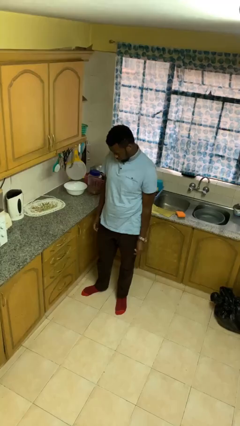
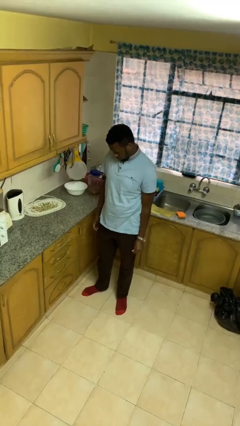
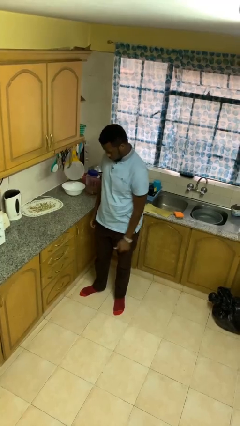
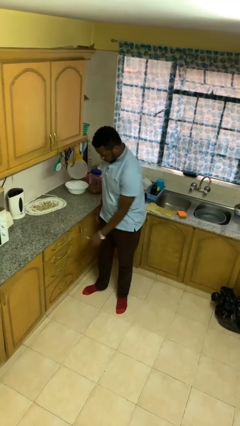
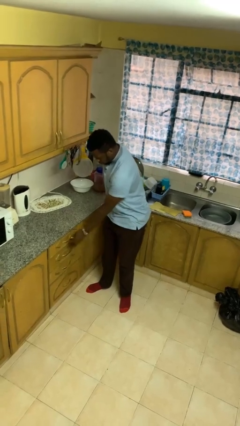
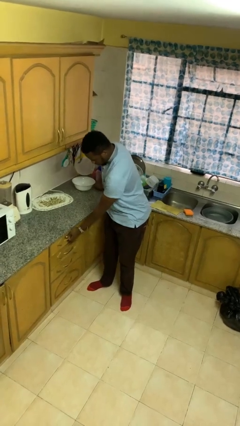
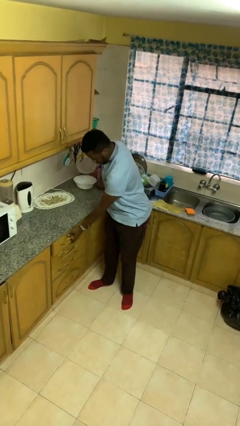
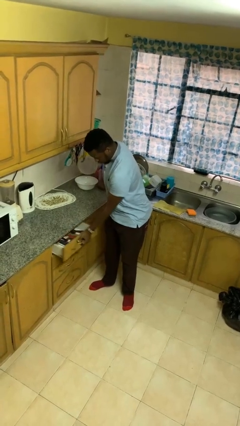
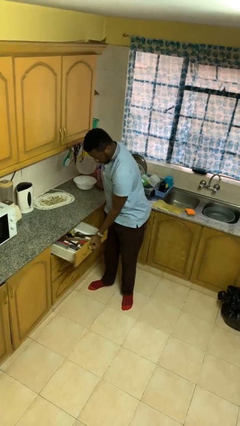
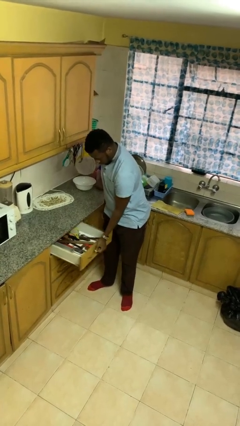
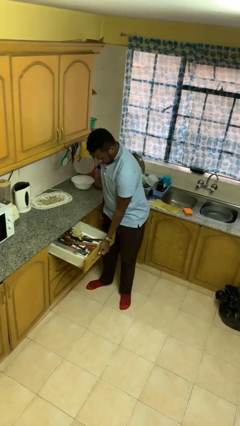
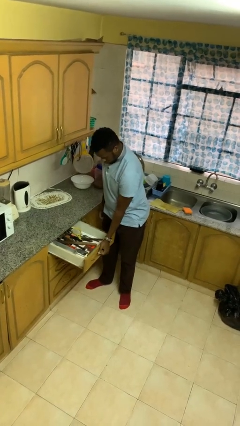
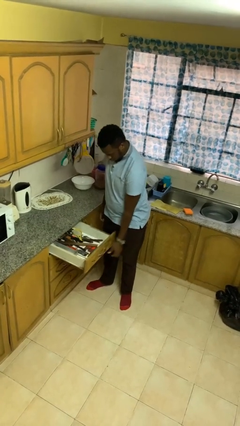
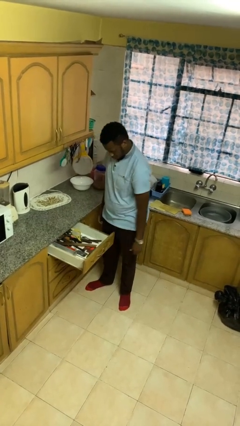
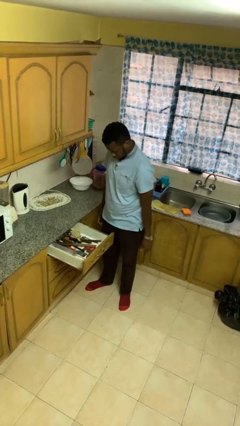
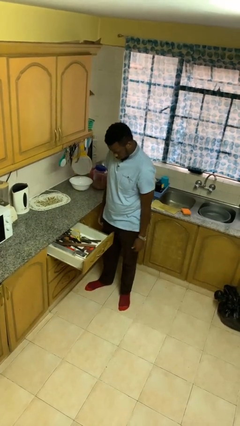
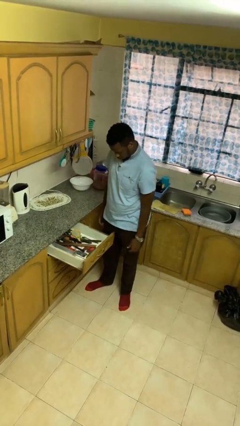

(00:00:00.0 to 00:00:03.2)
person opens kitchen drawer

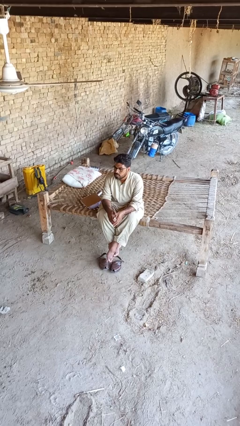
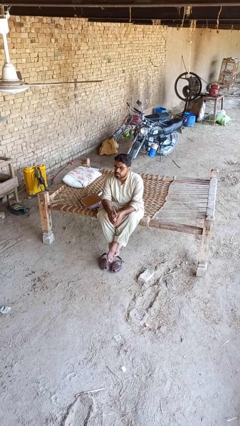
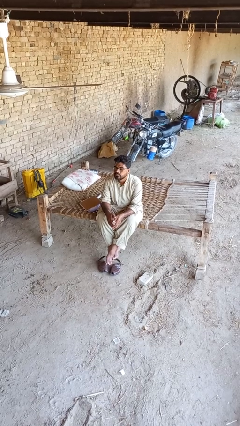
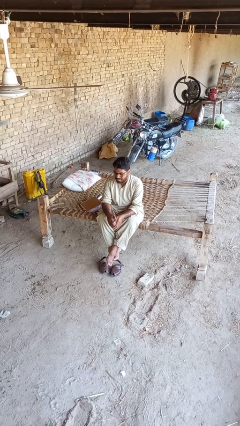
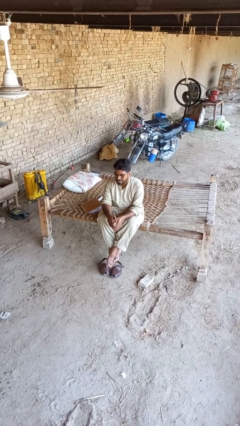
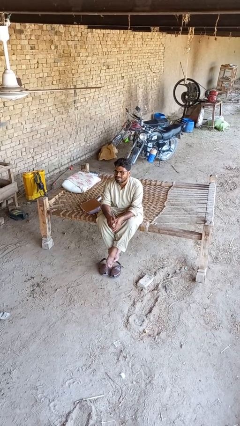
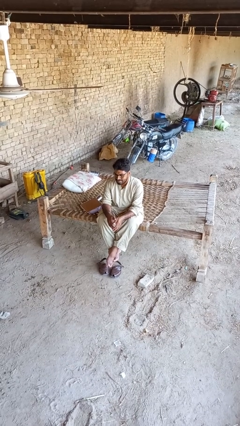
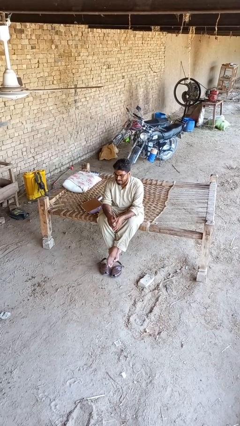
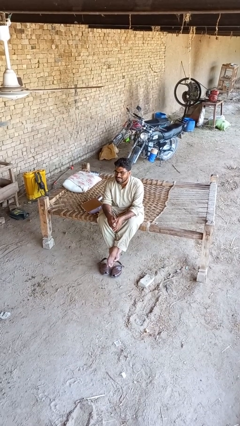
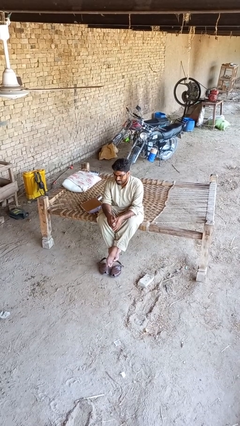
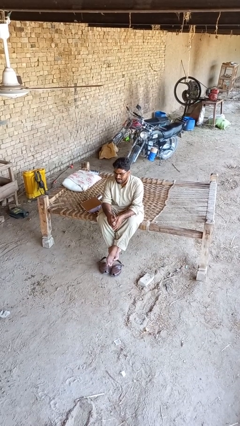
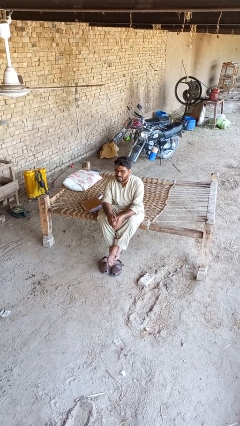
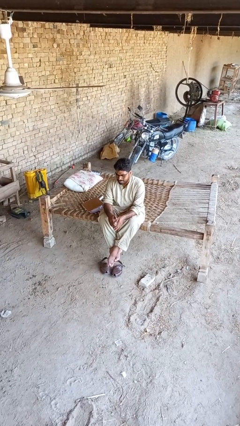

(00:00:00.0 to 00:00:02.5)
person nods head

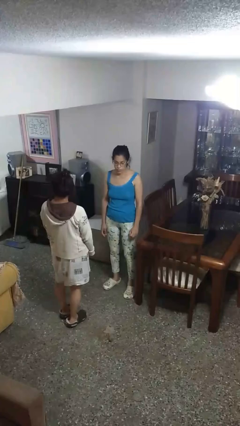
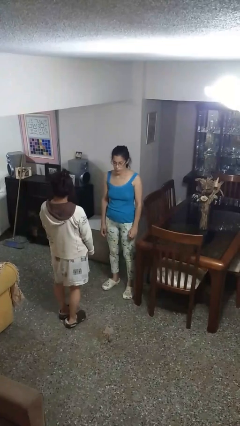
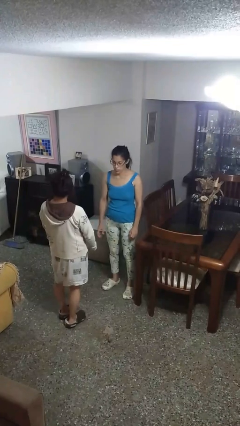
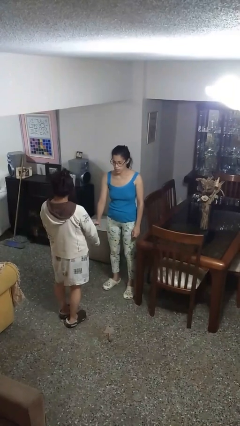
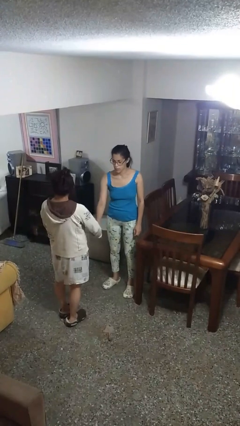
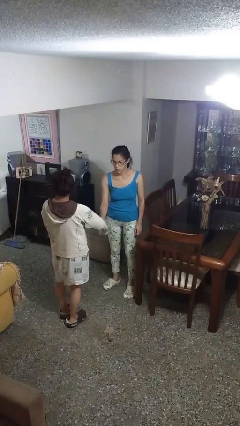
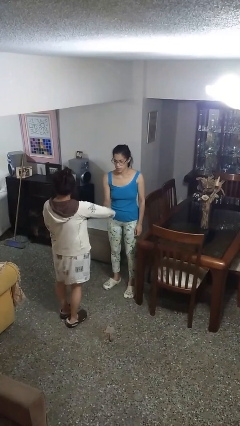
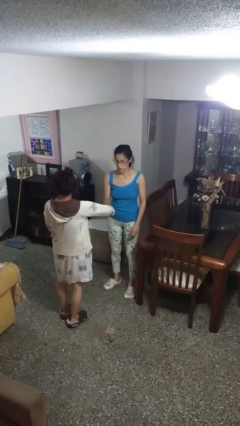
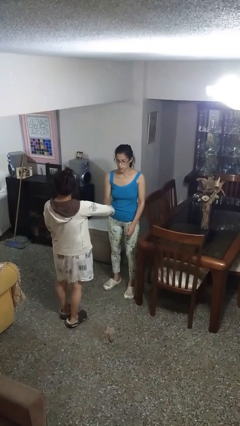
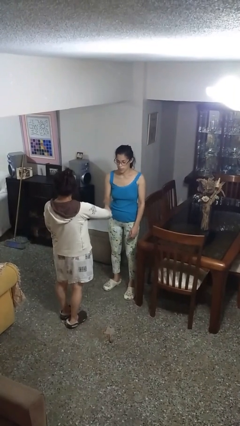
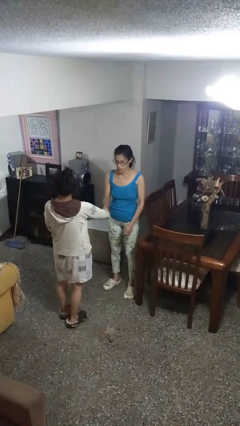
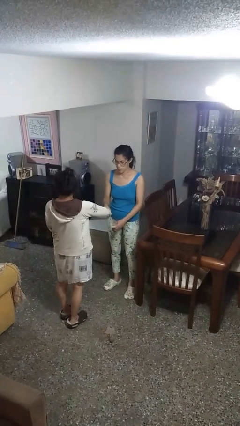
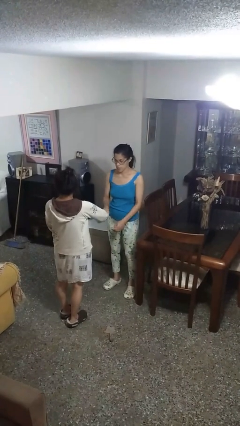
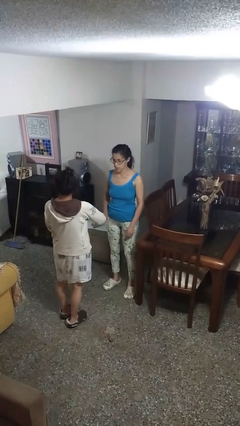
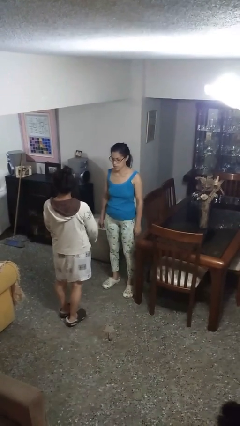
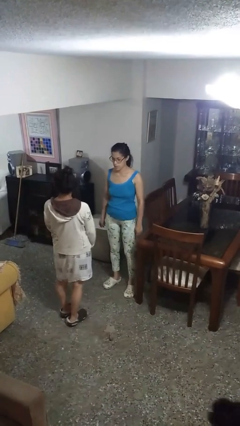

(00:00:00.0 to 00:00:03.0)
person grabs person by forearm

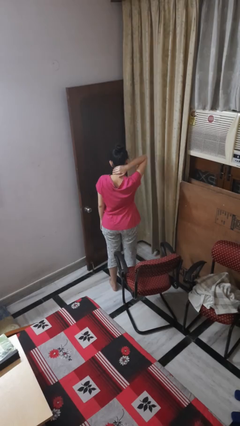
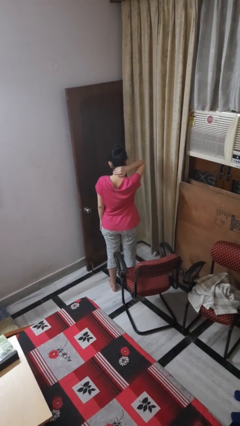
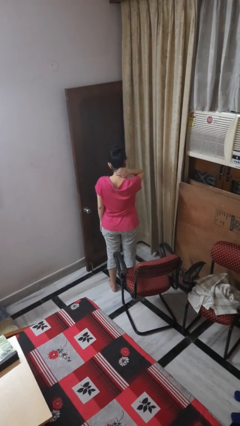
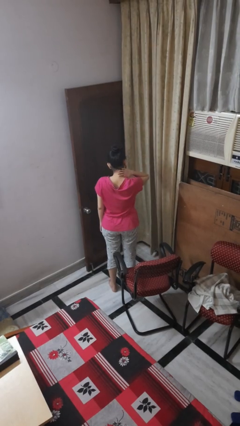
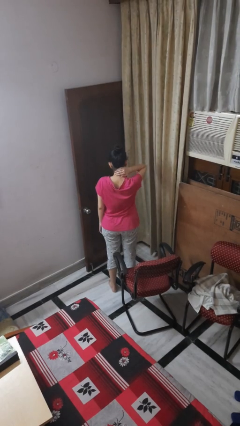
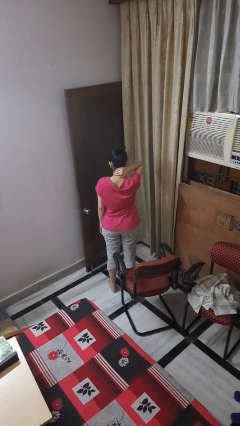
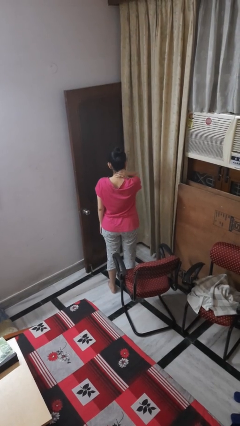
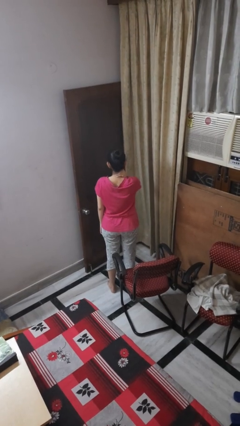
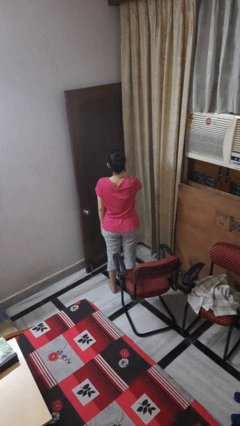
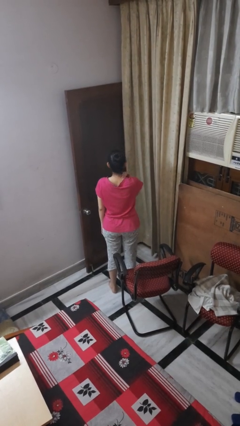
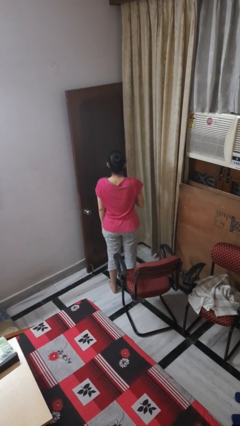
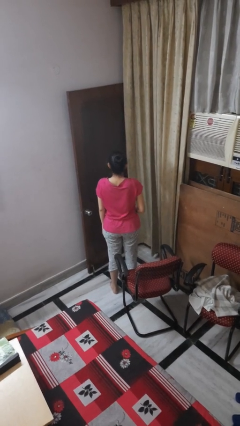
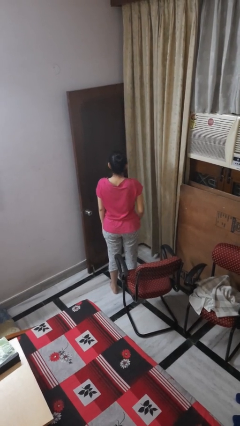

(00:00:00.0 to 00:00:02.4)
person rubs neck

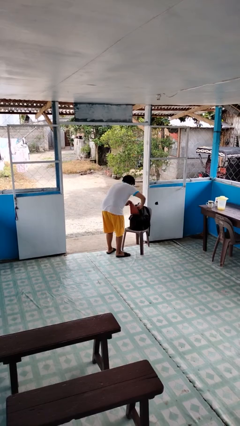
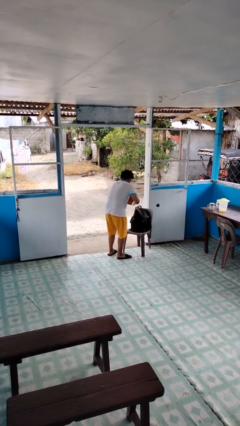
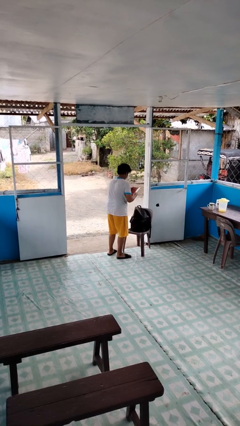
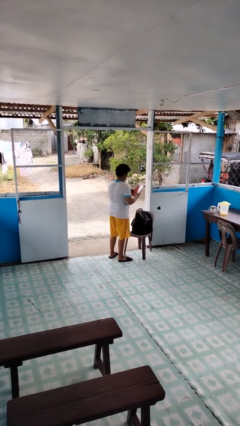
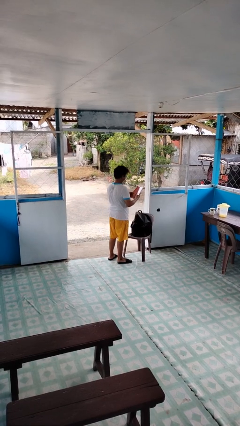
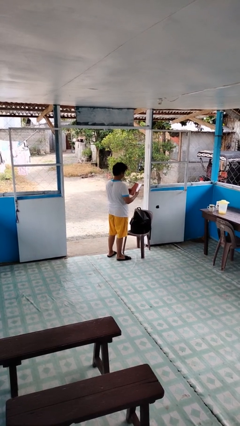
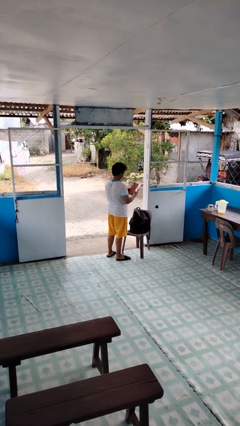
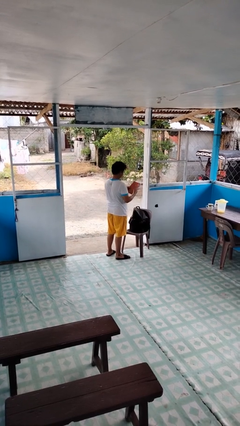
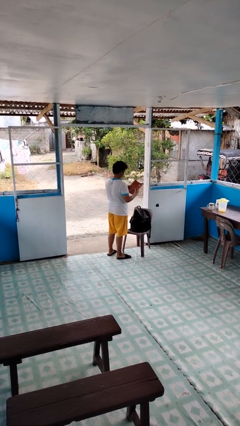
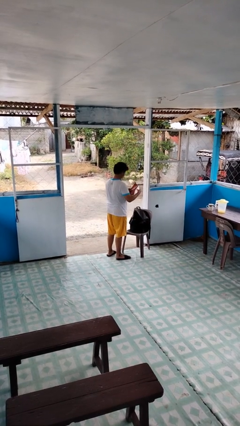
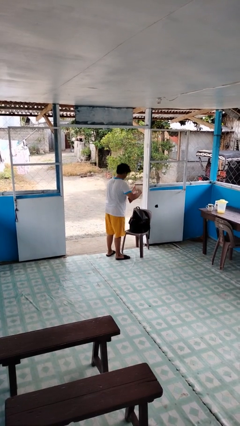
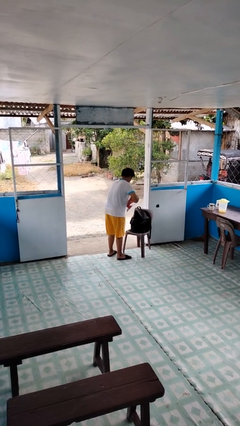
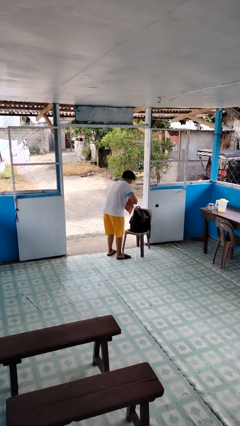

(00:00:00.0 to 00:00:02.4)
person takes object from backpack

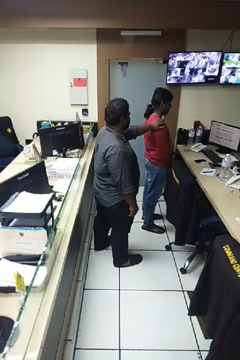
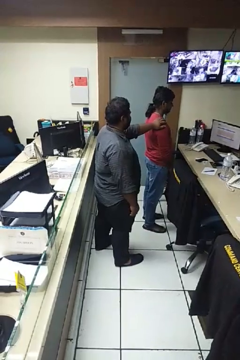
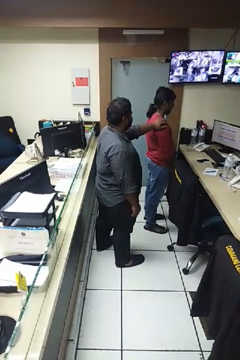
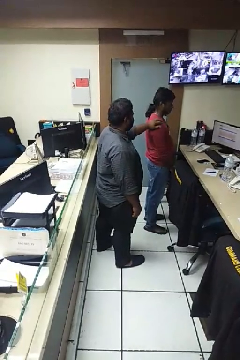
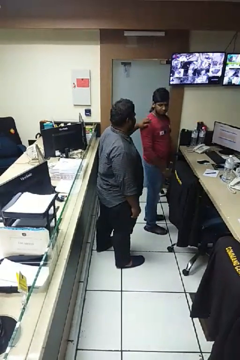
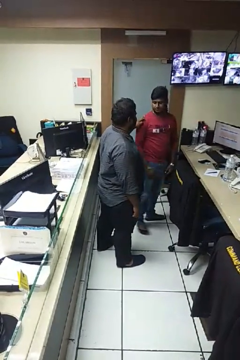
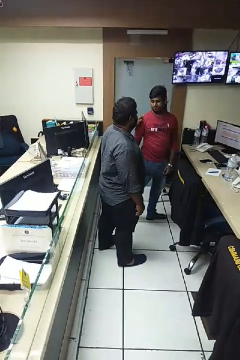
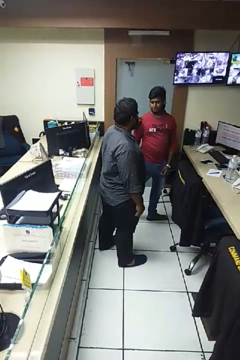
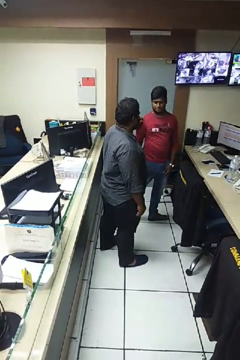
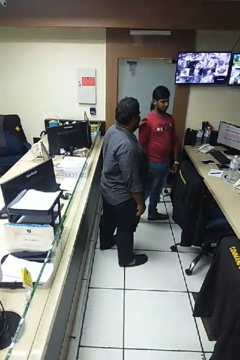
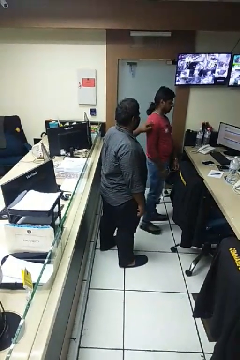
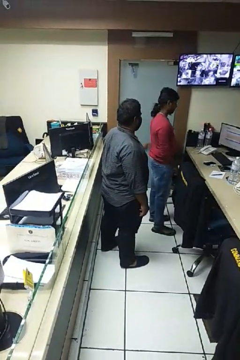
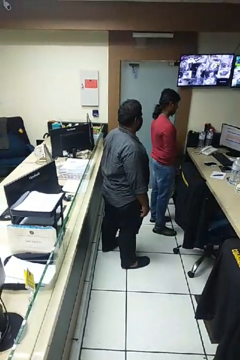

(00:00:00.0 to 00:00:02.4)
person spins person around

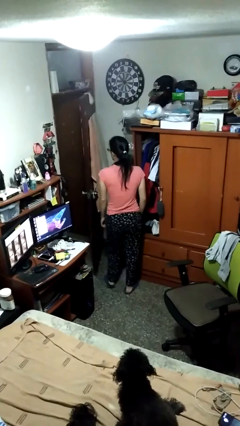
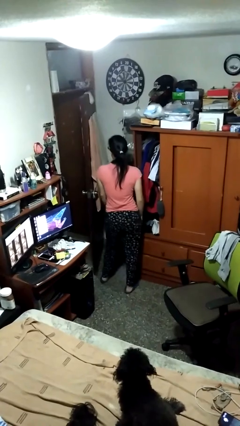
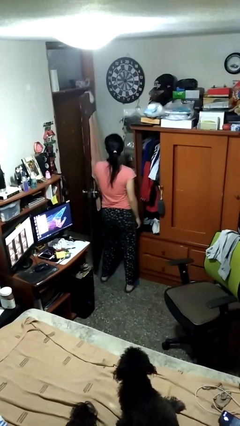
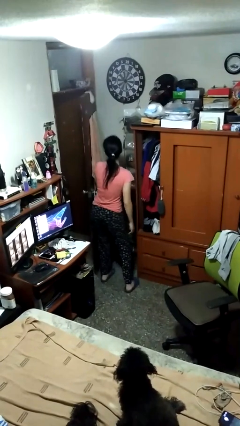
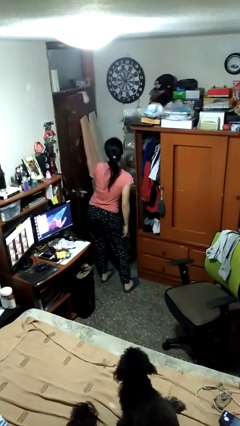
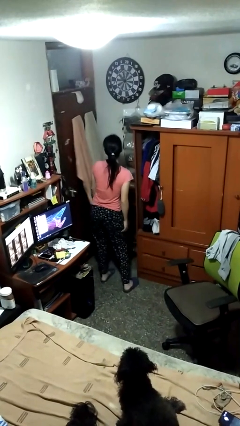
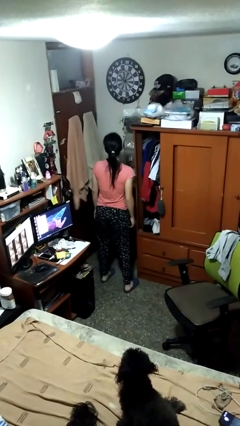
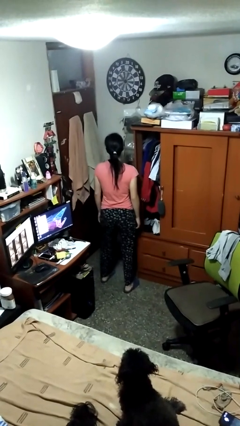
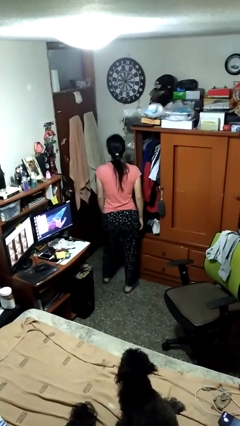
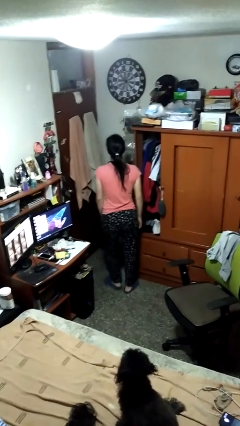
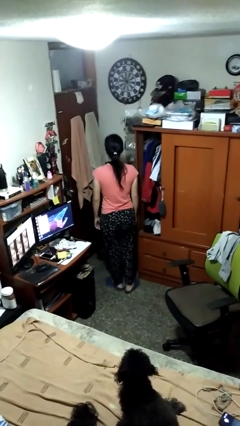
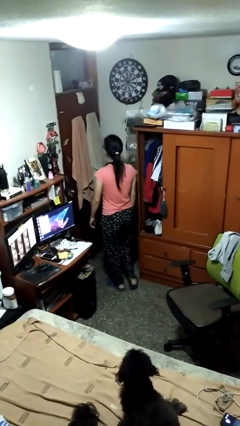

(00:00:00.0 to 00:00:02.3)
person closes door with hip
